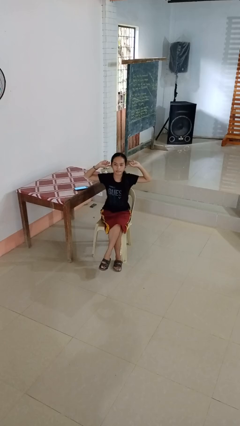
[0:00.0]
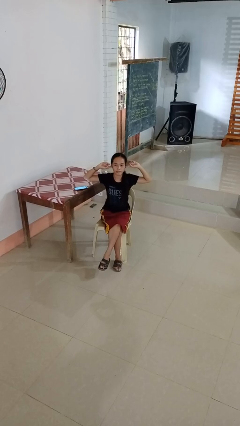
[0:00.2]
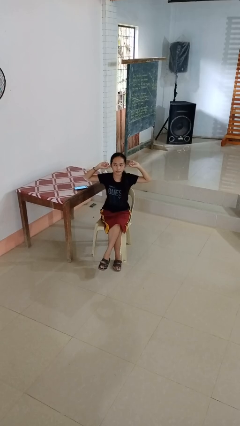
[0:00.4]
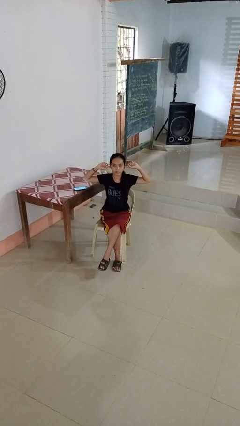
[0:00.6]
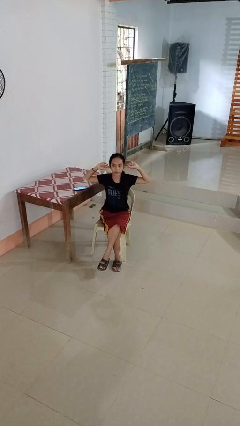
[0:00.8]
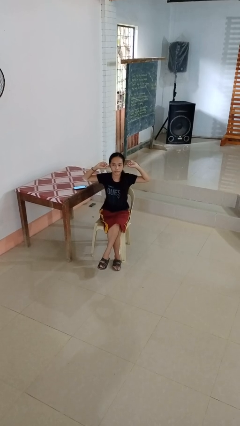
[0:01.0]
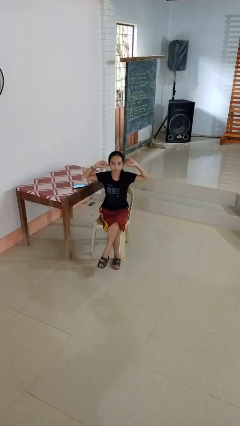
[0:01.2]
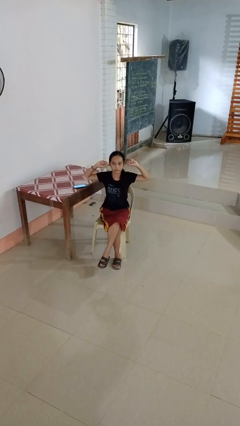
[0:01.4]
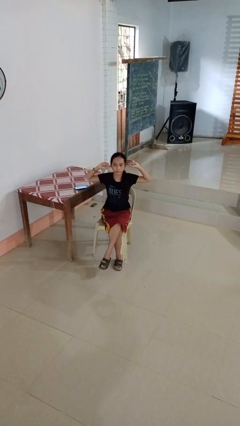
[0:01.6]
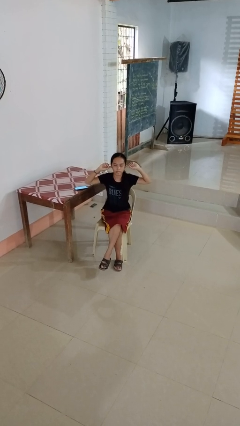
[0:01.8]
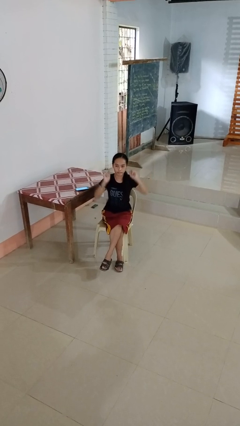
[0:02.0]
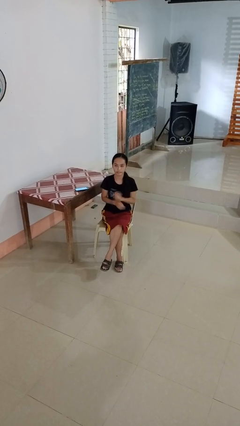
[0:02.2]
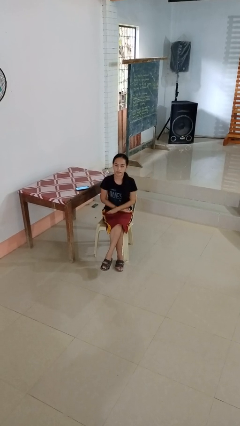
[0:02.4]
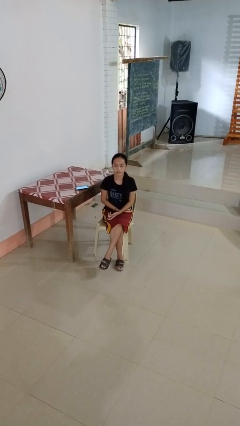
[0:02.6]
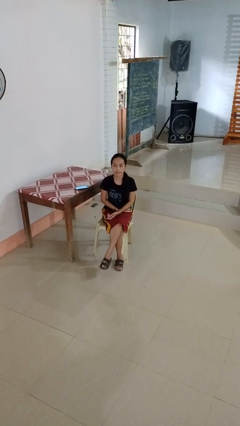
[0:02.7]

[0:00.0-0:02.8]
person puts fingers in ear

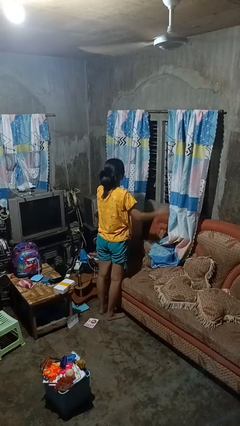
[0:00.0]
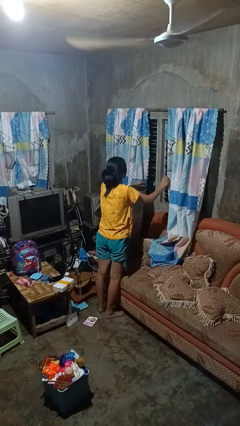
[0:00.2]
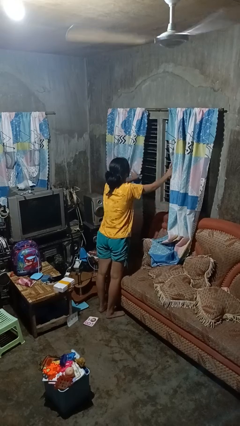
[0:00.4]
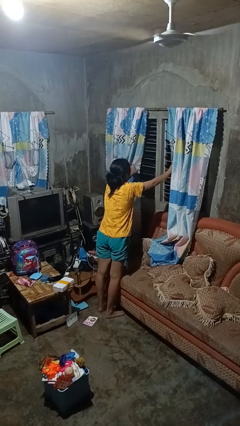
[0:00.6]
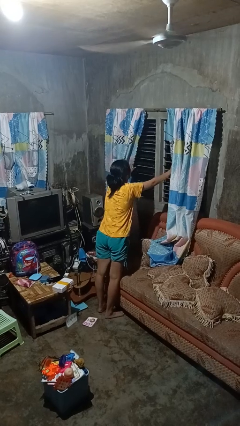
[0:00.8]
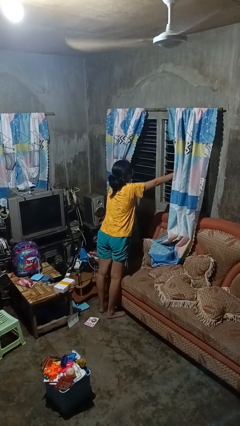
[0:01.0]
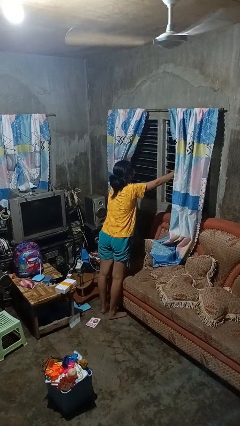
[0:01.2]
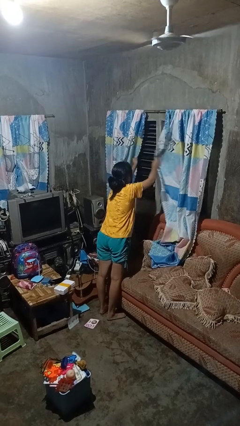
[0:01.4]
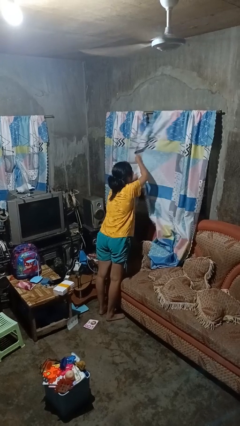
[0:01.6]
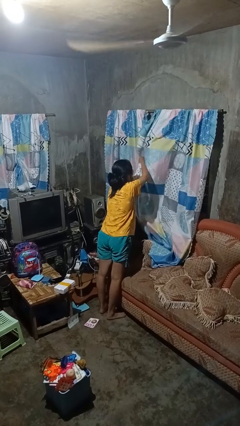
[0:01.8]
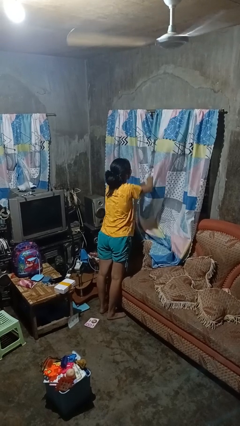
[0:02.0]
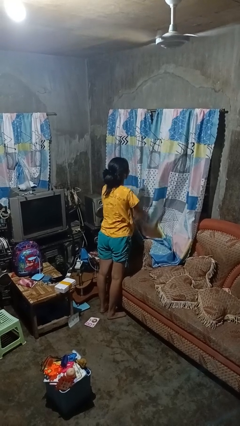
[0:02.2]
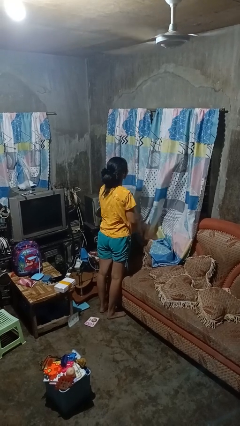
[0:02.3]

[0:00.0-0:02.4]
person closes curtains

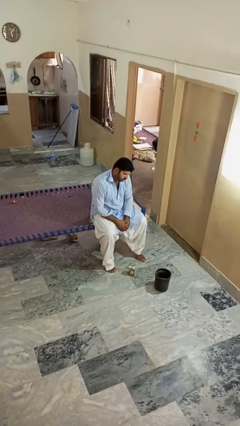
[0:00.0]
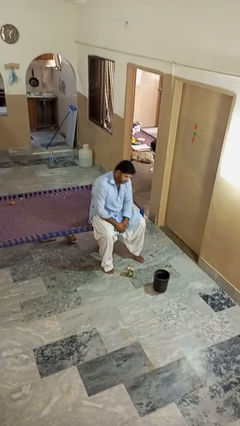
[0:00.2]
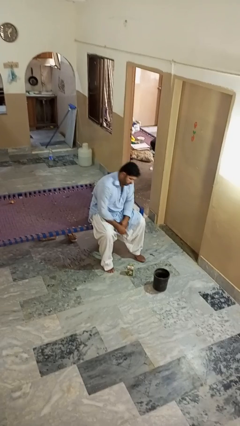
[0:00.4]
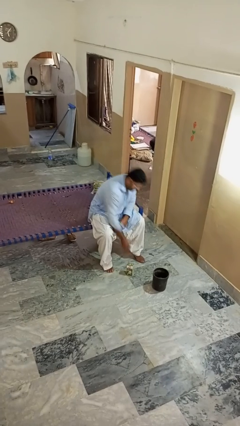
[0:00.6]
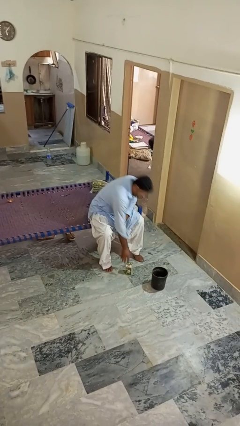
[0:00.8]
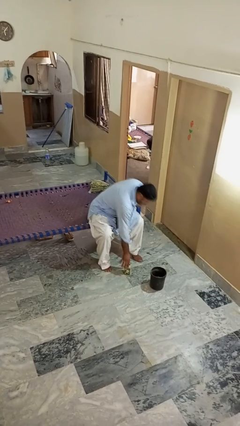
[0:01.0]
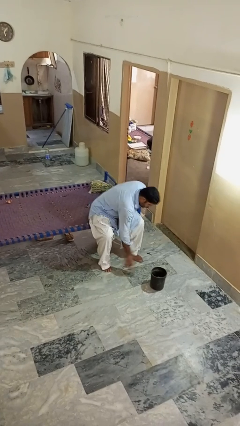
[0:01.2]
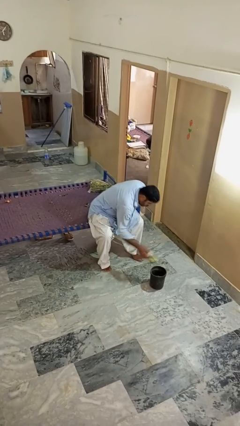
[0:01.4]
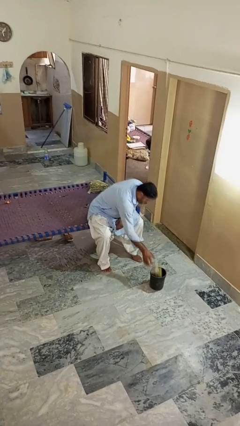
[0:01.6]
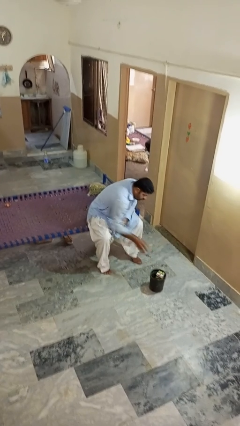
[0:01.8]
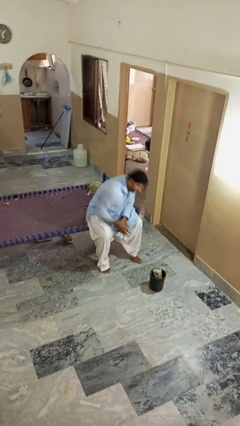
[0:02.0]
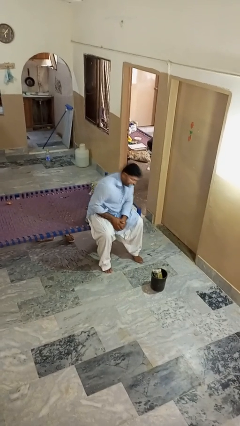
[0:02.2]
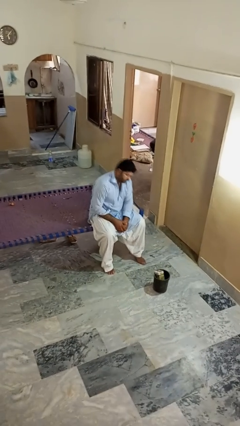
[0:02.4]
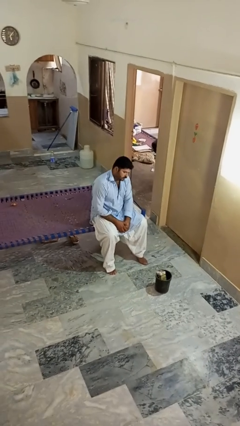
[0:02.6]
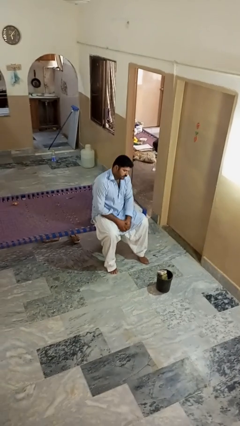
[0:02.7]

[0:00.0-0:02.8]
person puts object into basket

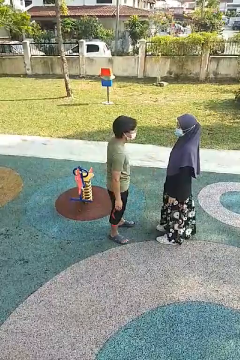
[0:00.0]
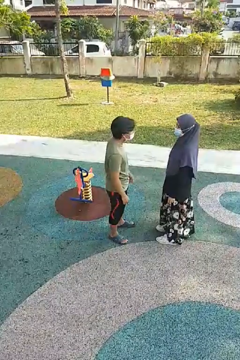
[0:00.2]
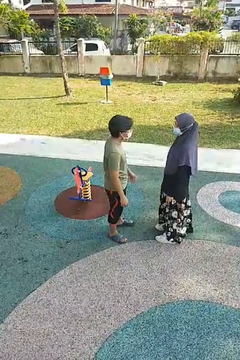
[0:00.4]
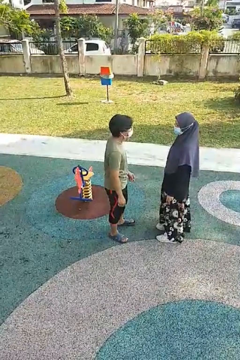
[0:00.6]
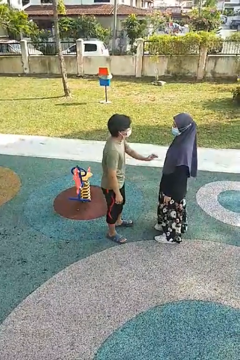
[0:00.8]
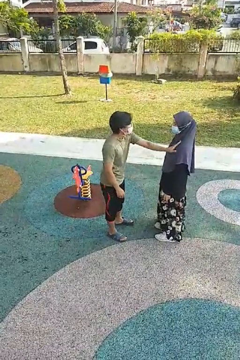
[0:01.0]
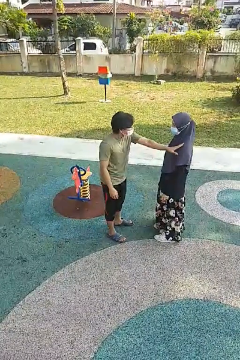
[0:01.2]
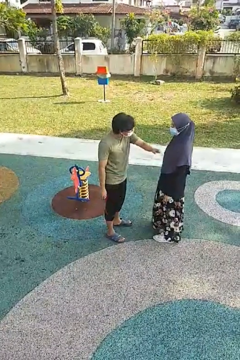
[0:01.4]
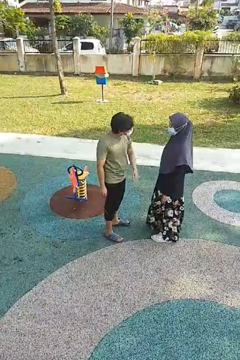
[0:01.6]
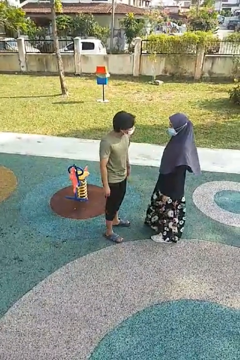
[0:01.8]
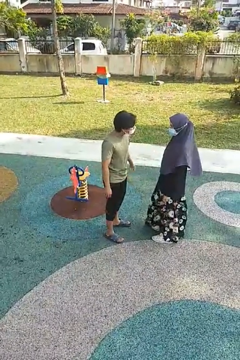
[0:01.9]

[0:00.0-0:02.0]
person shoves person

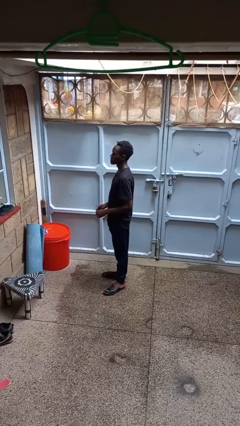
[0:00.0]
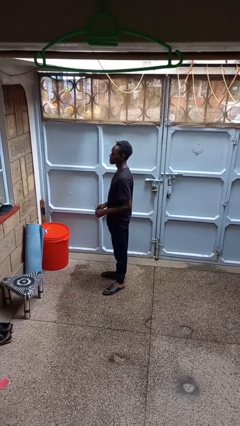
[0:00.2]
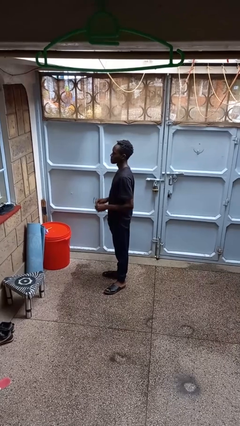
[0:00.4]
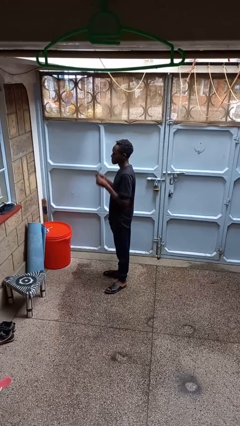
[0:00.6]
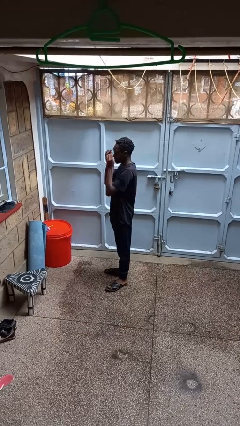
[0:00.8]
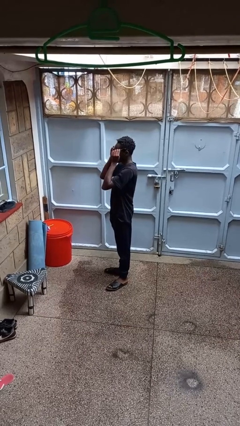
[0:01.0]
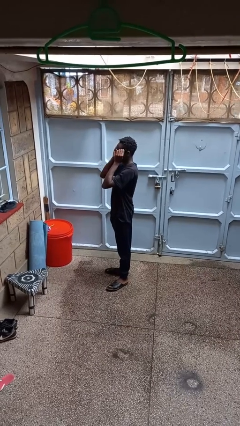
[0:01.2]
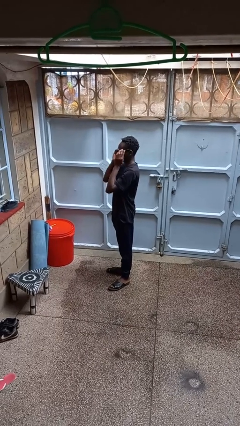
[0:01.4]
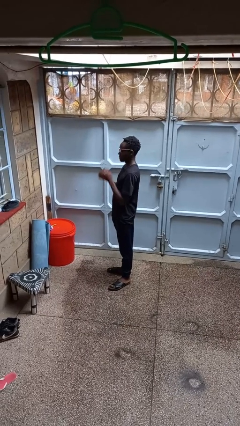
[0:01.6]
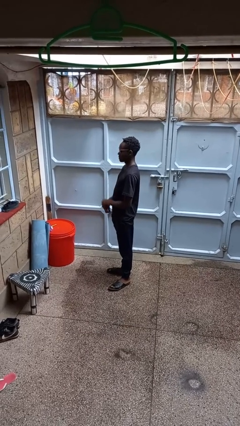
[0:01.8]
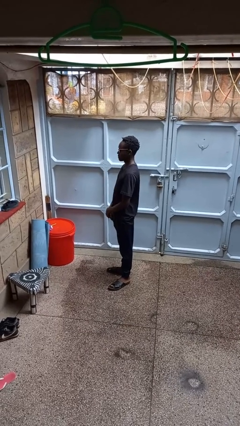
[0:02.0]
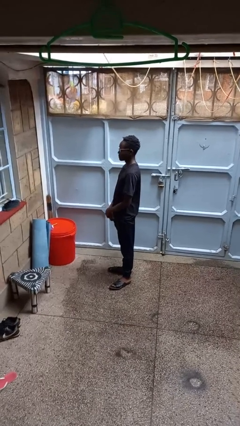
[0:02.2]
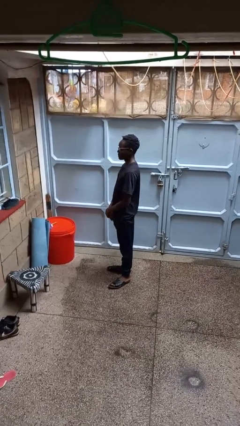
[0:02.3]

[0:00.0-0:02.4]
person puts on glasses

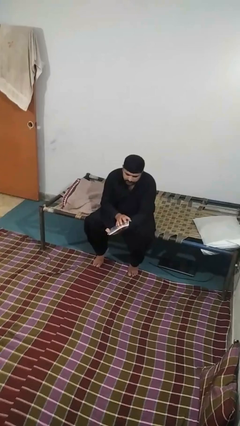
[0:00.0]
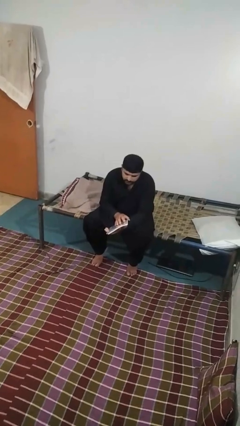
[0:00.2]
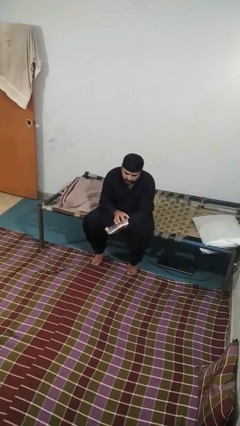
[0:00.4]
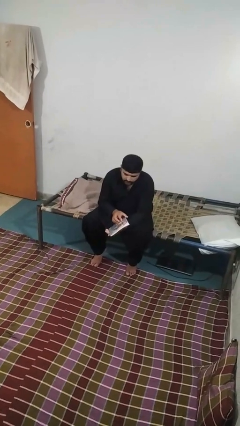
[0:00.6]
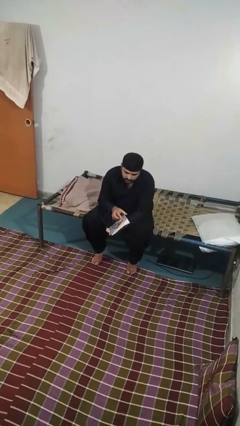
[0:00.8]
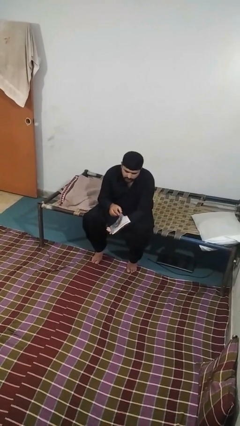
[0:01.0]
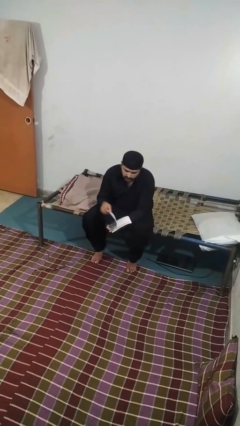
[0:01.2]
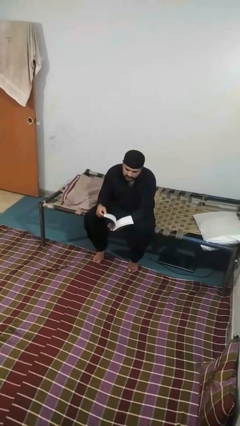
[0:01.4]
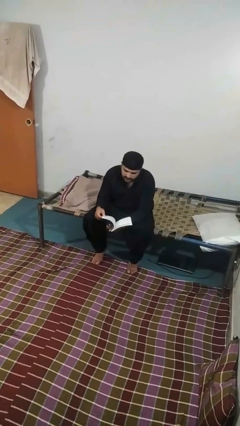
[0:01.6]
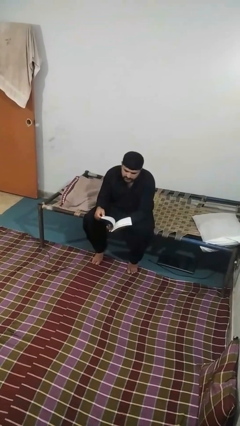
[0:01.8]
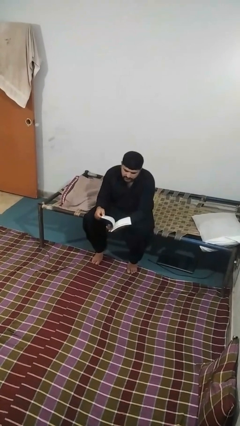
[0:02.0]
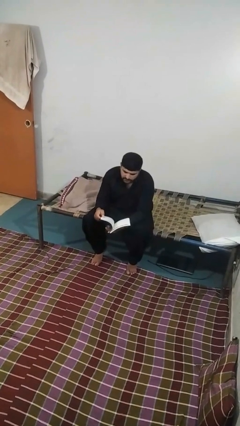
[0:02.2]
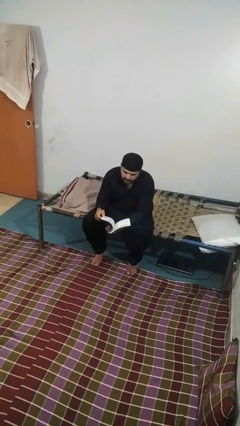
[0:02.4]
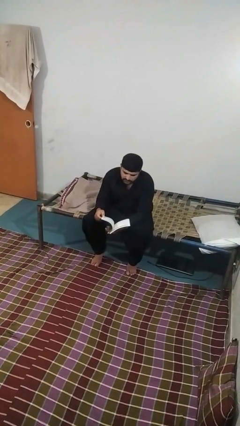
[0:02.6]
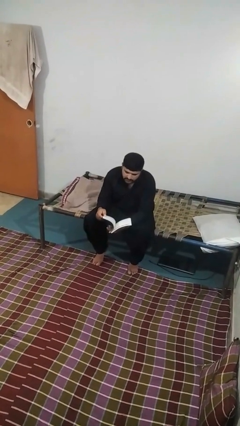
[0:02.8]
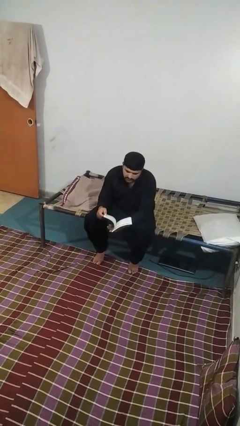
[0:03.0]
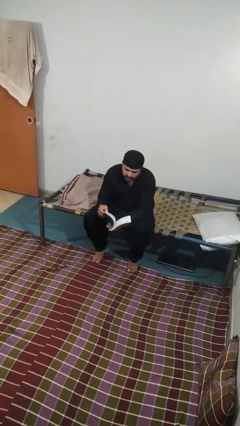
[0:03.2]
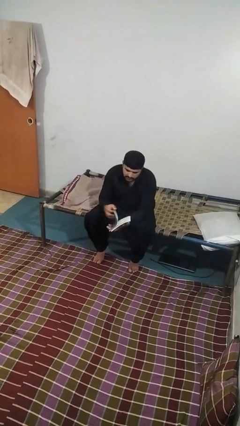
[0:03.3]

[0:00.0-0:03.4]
person reads book

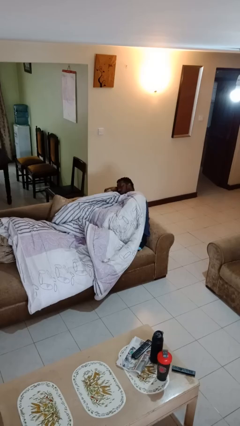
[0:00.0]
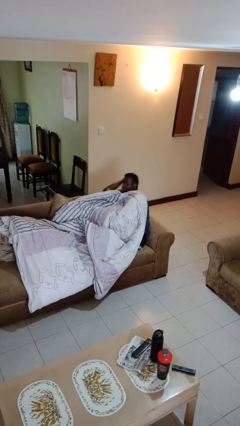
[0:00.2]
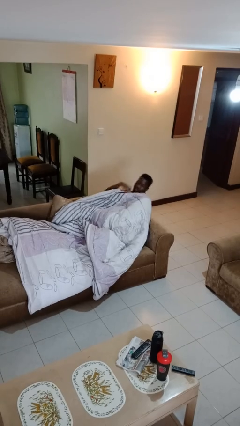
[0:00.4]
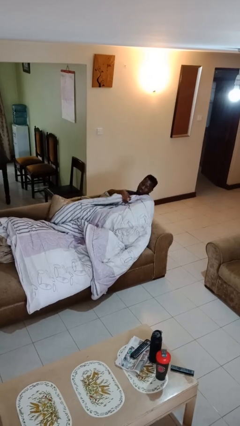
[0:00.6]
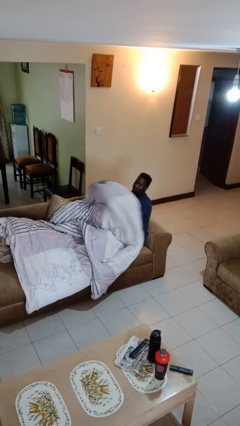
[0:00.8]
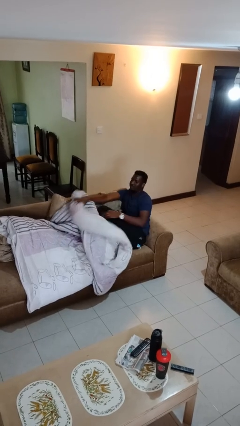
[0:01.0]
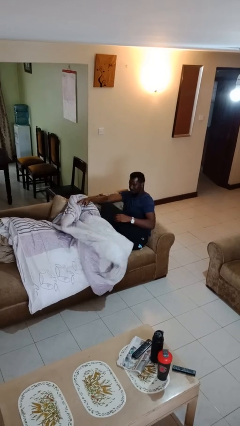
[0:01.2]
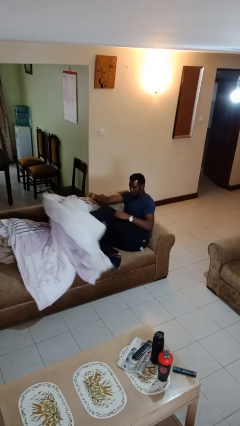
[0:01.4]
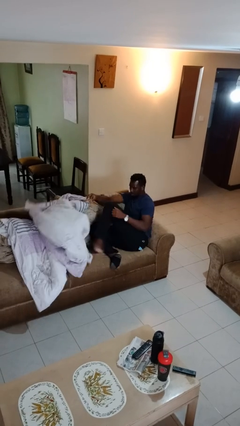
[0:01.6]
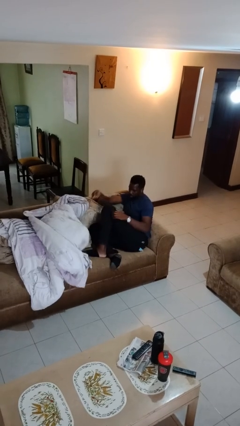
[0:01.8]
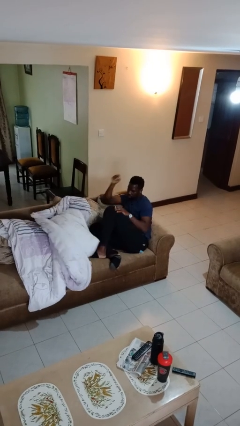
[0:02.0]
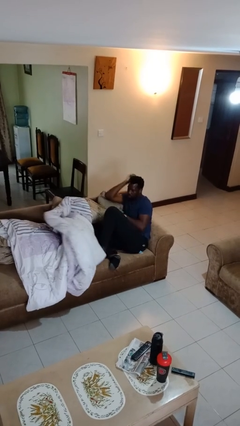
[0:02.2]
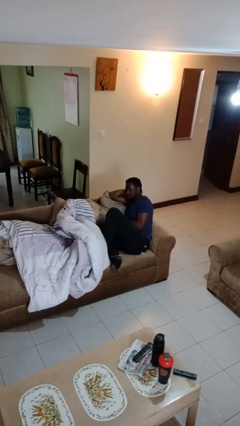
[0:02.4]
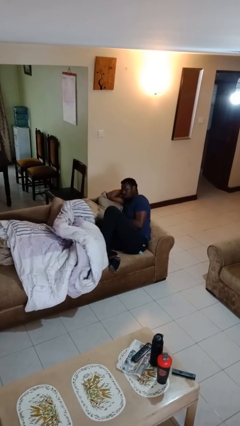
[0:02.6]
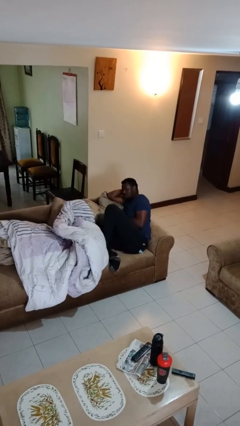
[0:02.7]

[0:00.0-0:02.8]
person uncovers with blanket
